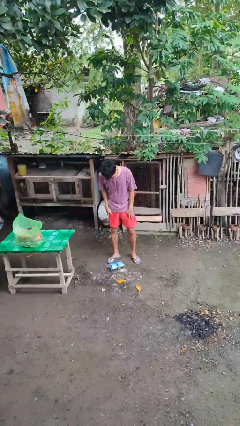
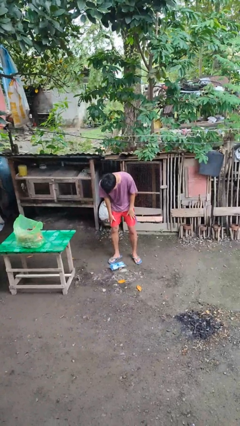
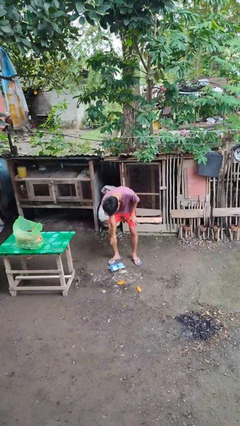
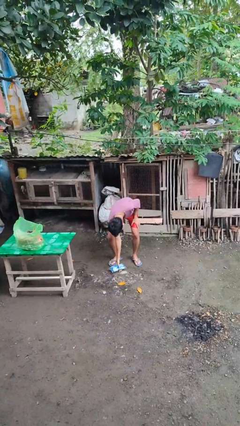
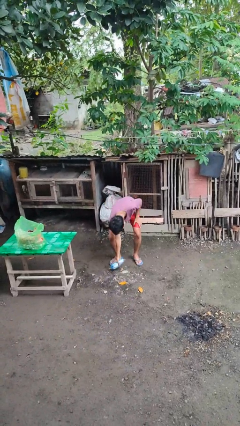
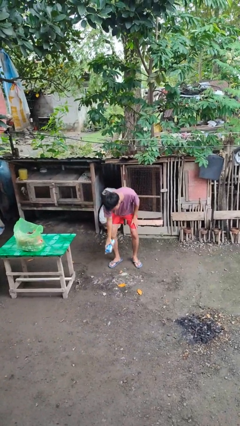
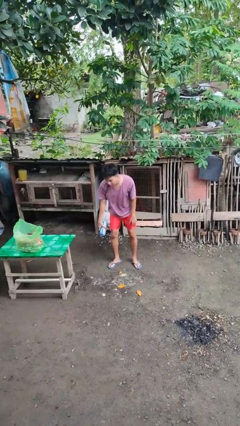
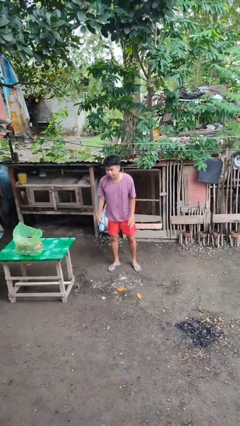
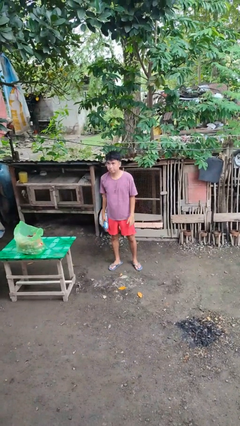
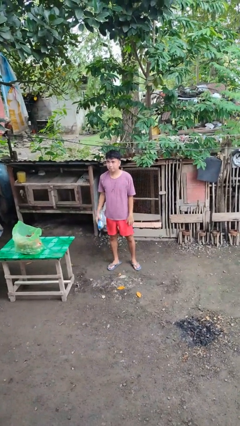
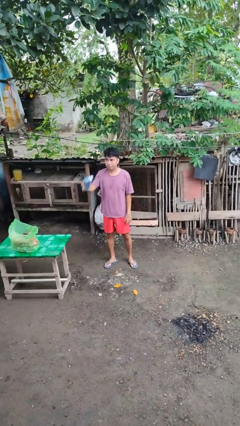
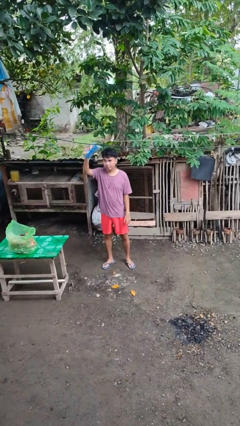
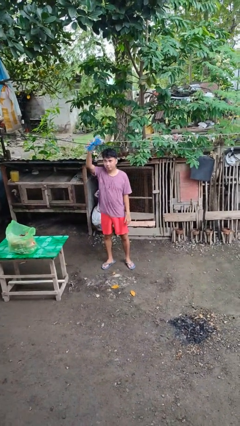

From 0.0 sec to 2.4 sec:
person picks up object from floor

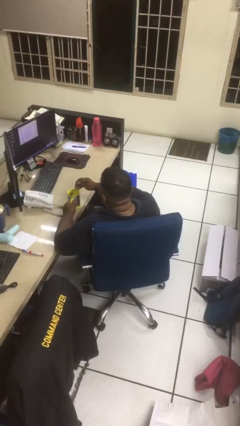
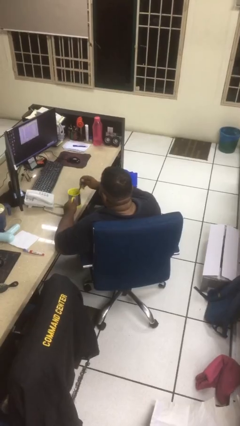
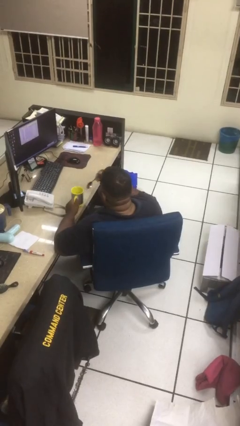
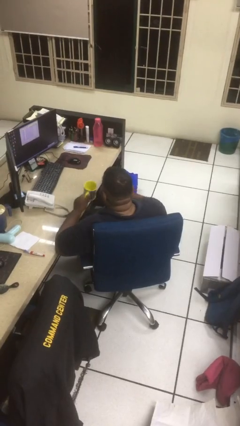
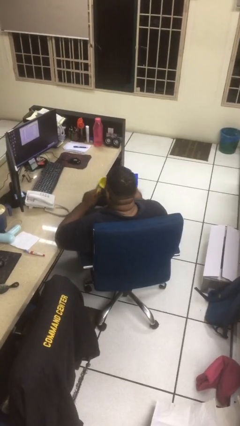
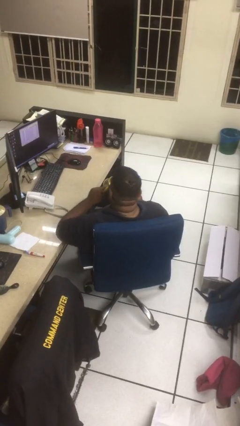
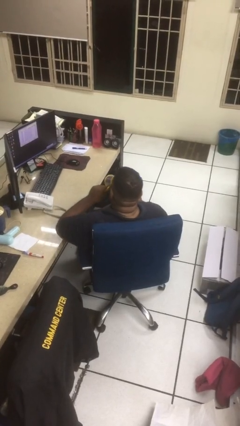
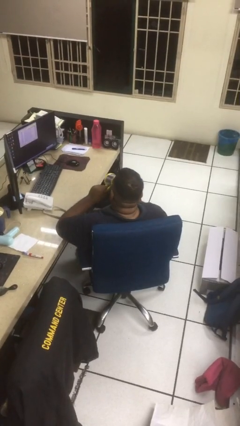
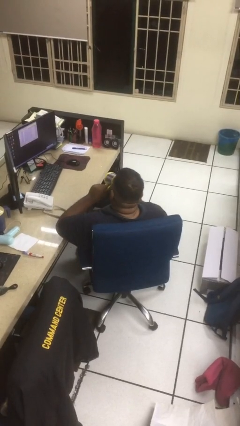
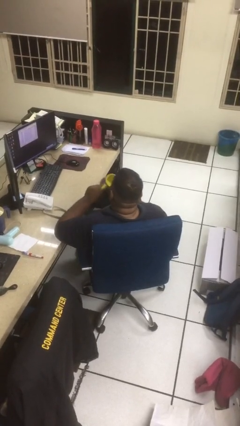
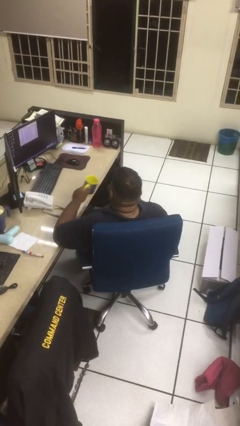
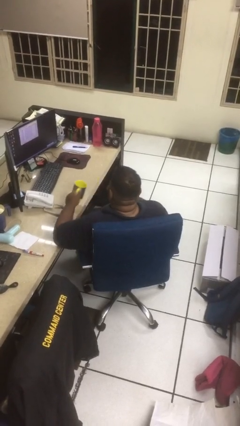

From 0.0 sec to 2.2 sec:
person drinks from mug

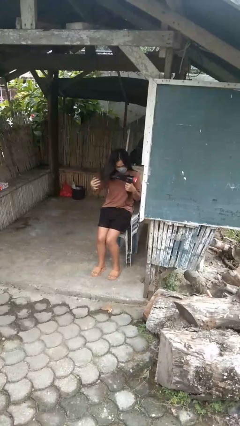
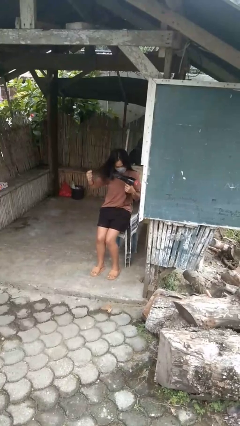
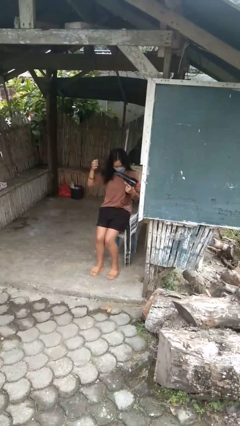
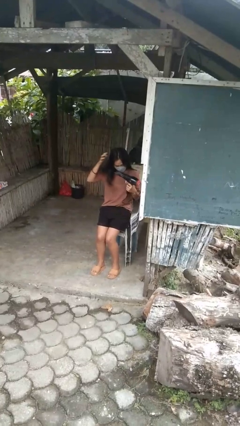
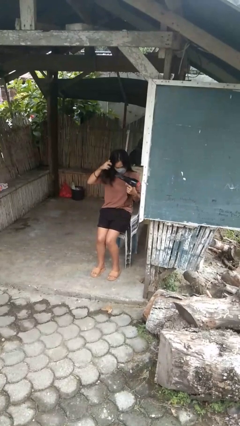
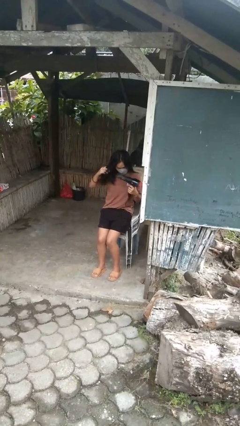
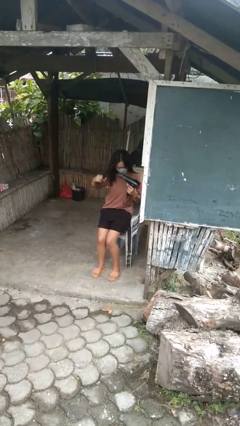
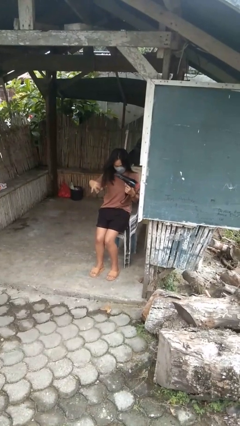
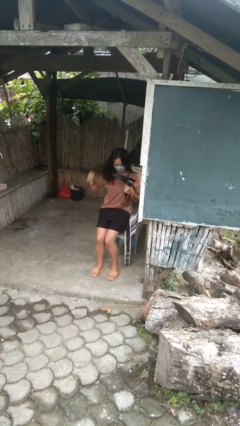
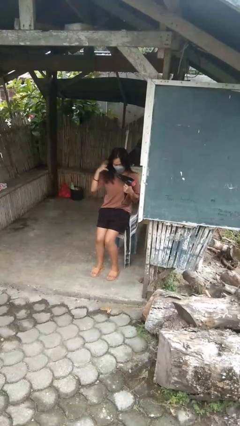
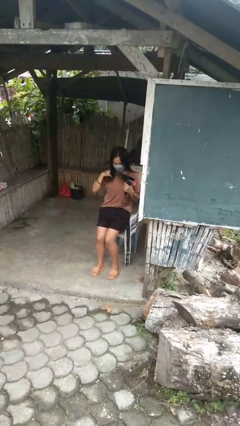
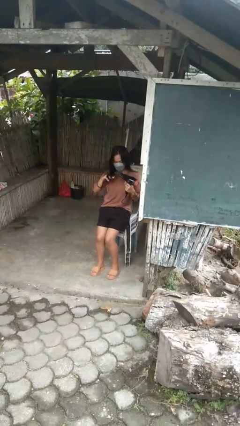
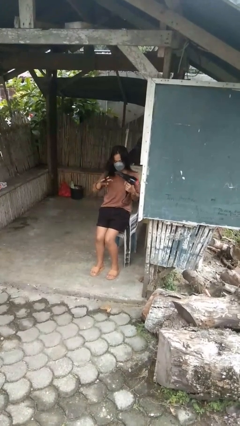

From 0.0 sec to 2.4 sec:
person dries hair with hairdryer

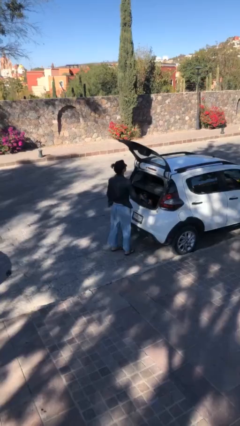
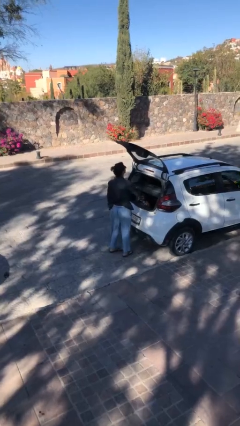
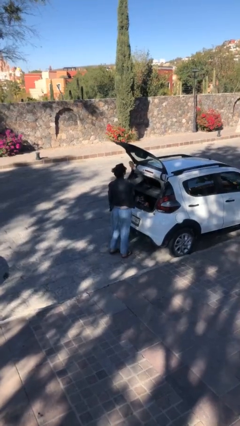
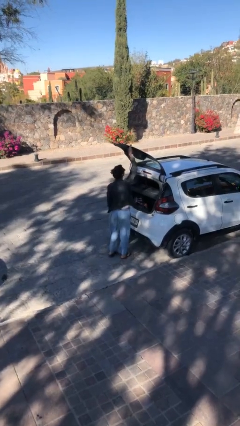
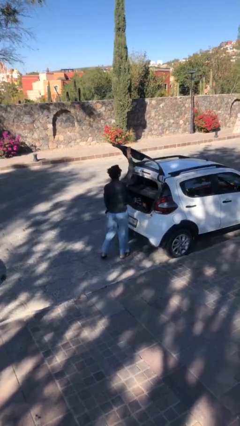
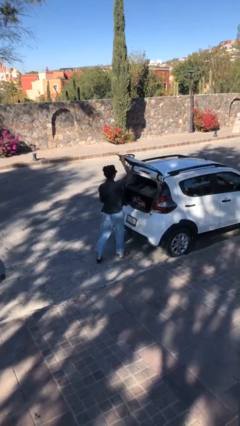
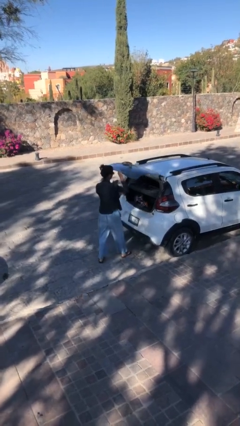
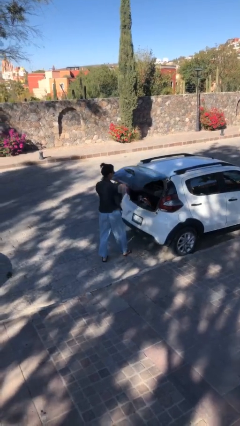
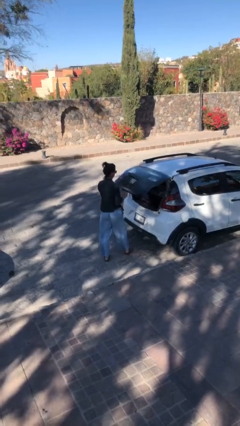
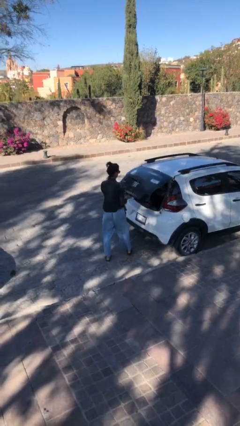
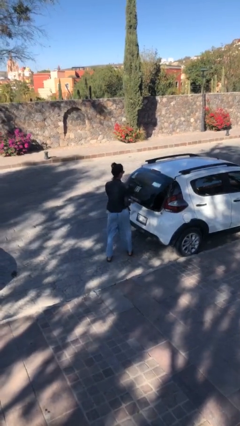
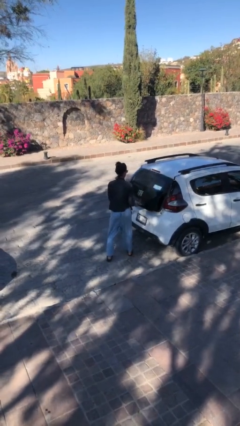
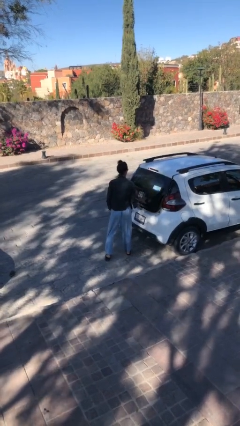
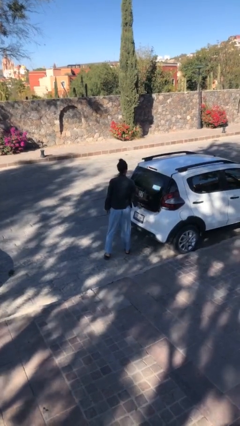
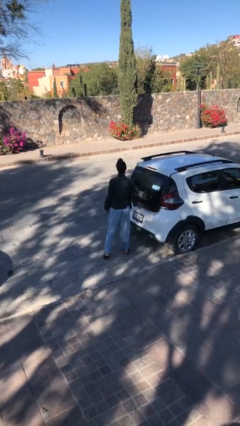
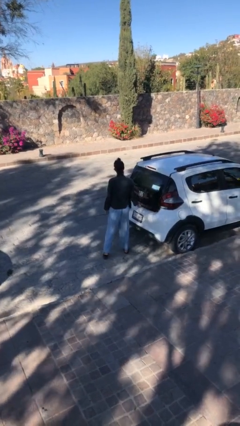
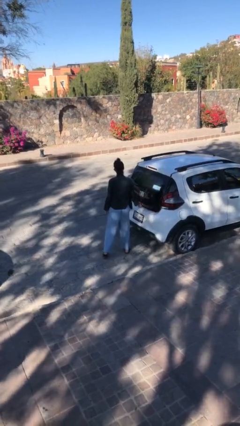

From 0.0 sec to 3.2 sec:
person closes car trunk

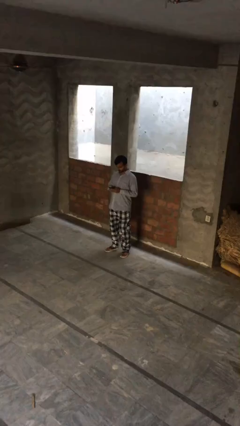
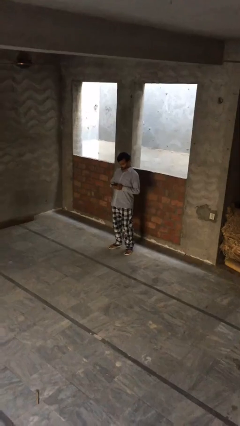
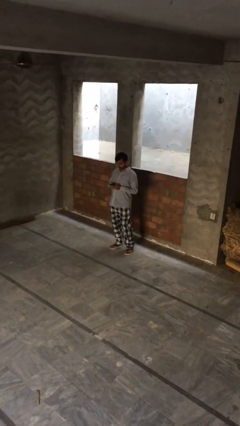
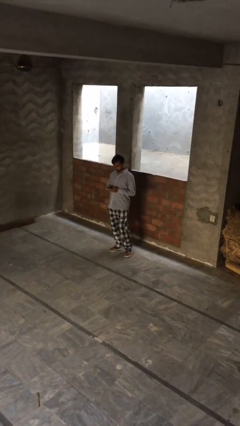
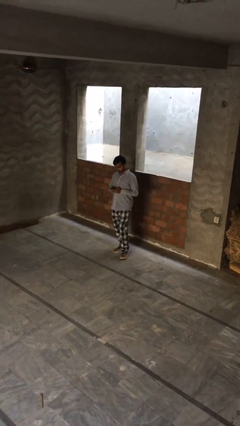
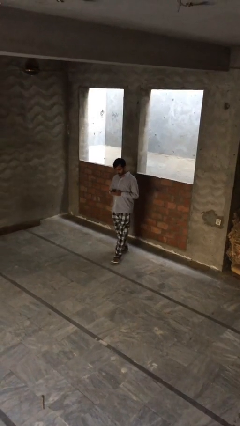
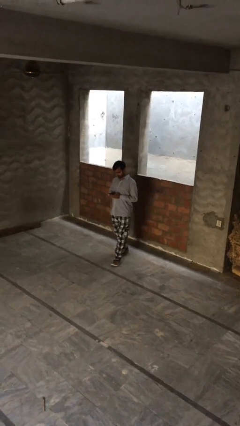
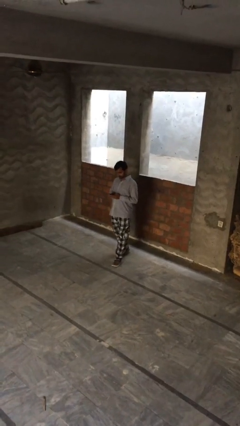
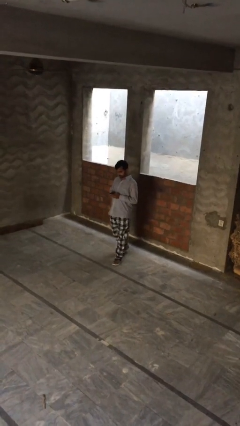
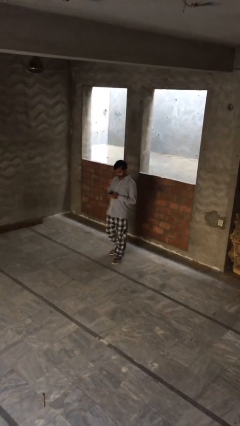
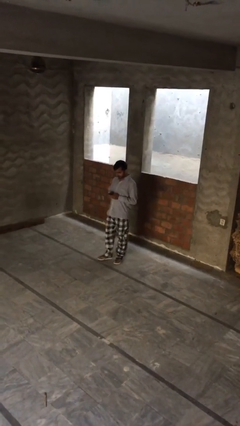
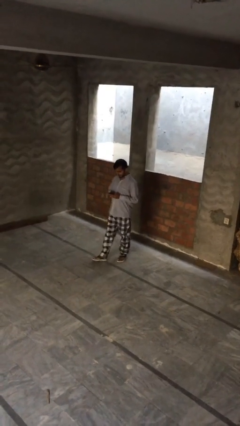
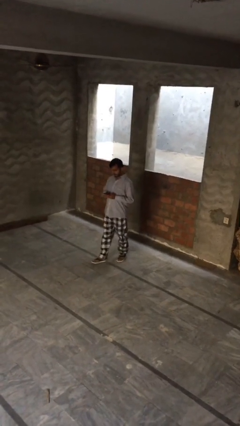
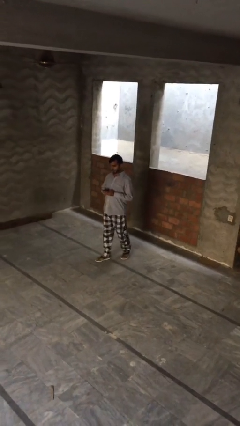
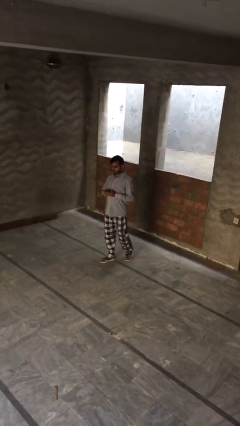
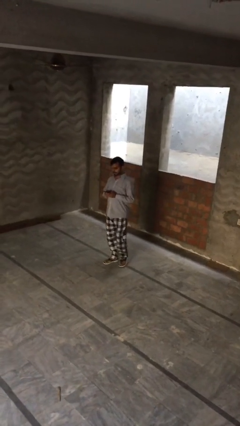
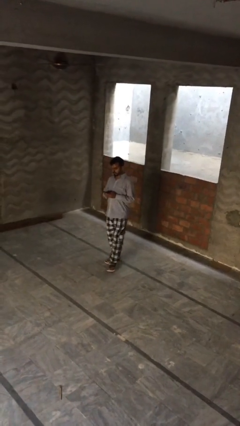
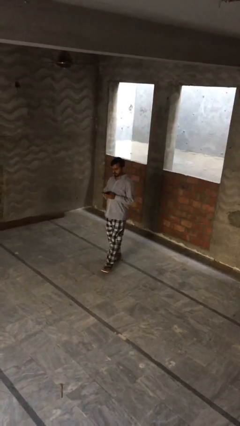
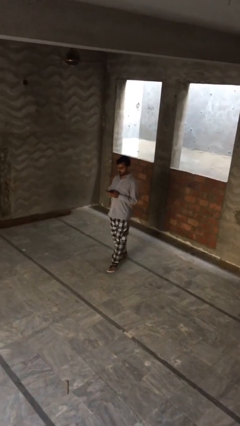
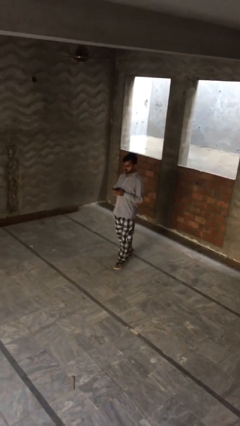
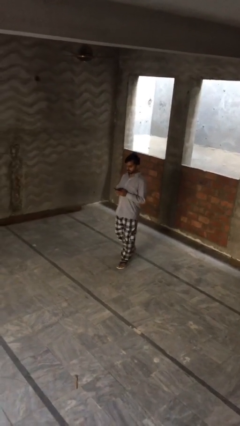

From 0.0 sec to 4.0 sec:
person texts on phone

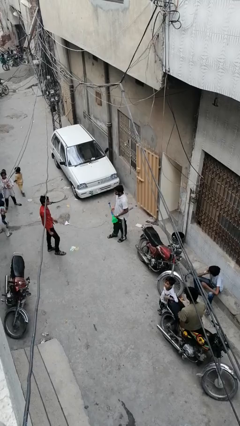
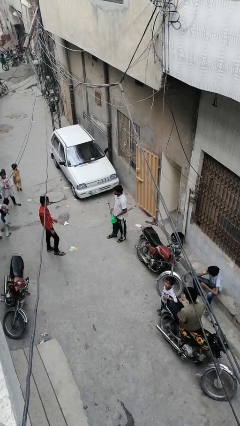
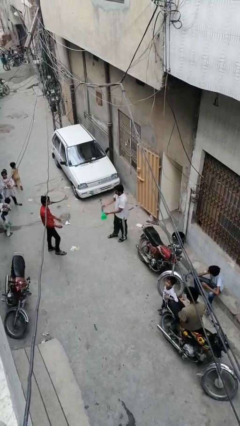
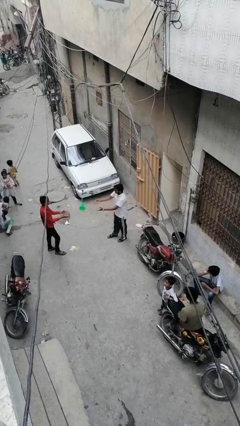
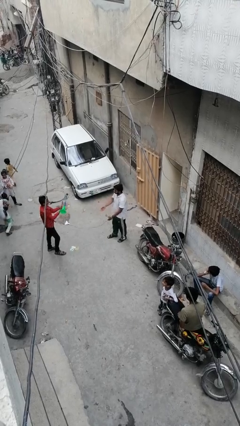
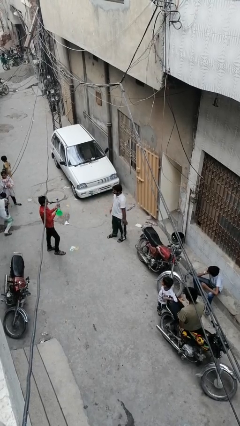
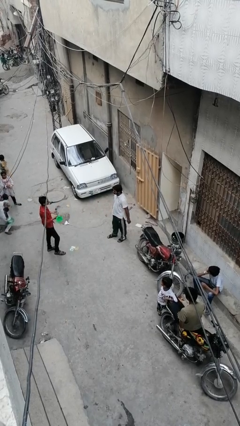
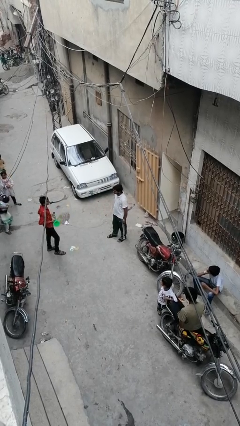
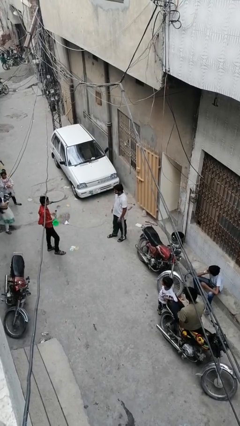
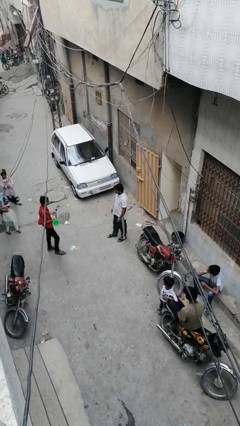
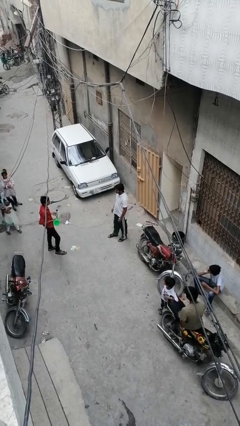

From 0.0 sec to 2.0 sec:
person throws object to person

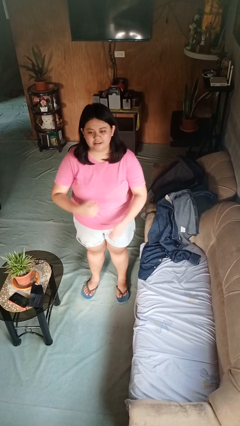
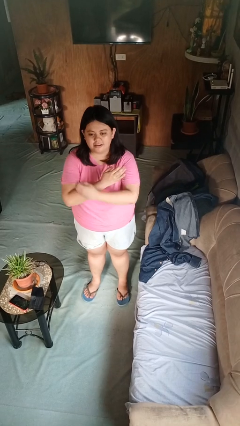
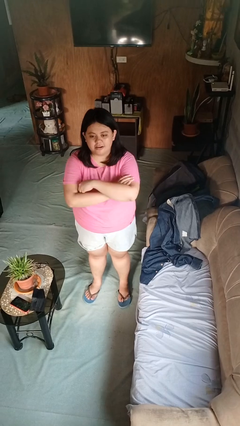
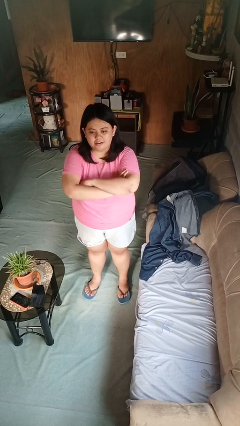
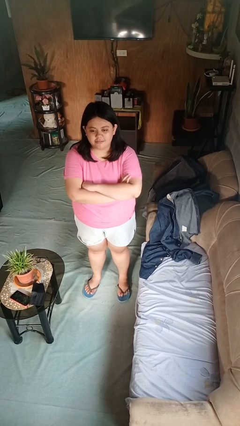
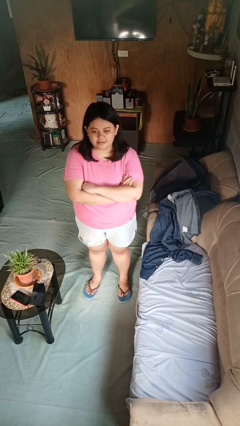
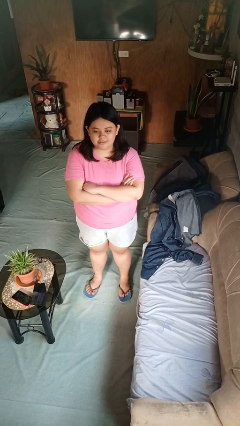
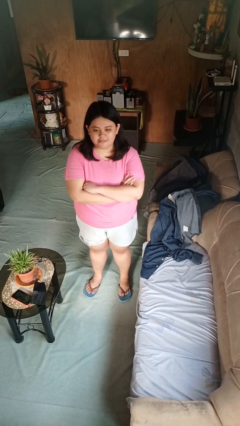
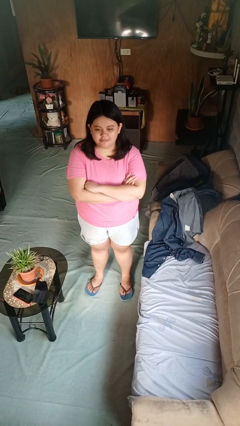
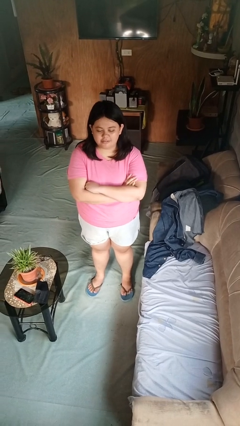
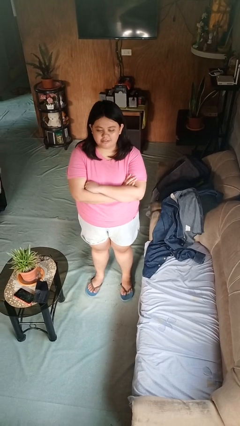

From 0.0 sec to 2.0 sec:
person crosses arms
